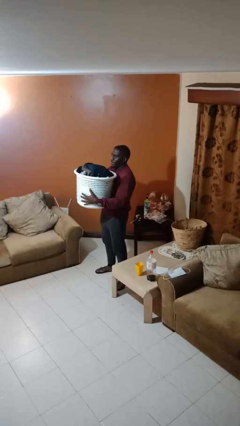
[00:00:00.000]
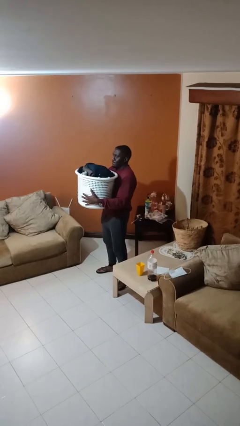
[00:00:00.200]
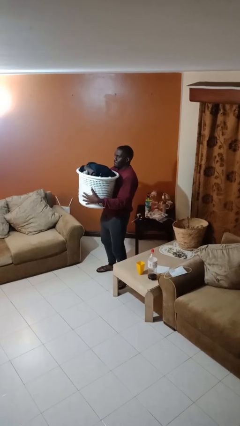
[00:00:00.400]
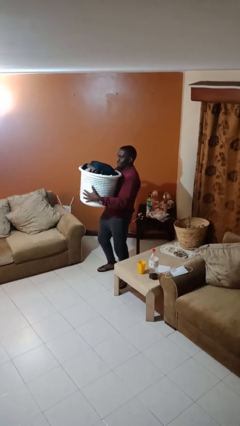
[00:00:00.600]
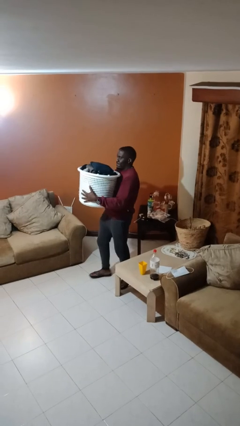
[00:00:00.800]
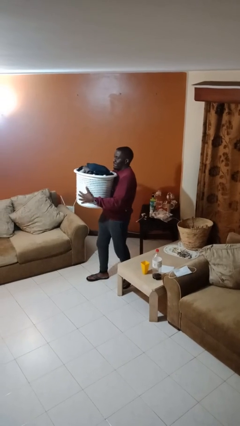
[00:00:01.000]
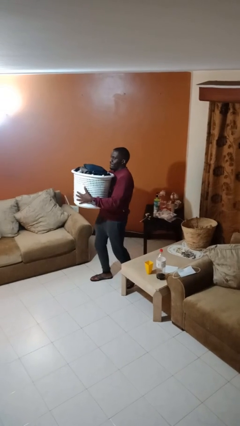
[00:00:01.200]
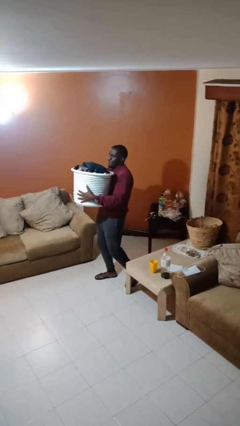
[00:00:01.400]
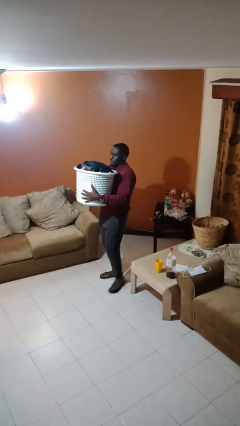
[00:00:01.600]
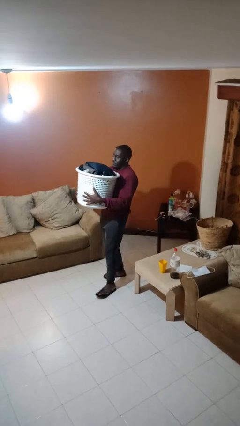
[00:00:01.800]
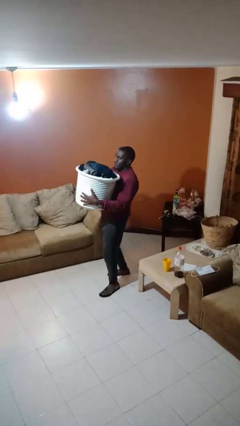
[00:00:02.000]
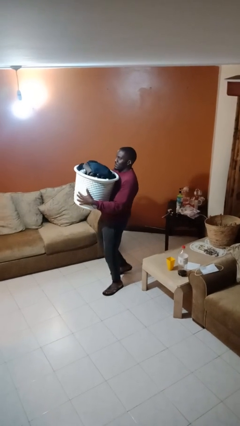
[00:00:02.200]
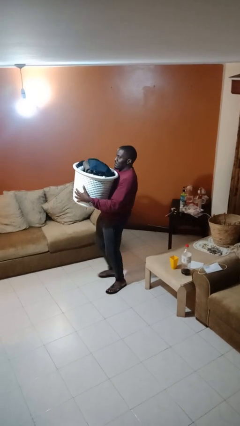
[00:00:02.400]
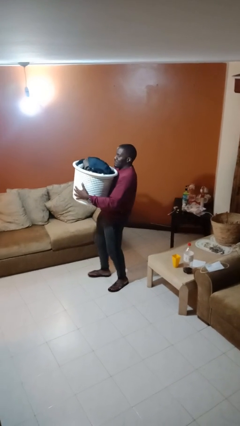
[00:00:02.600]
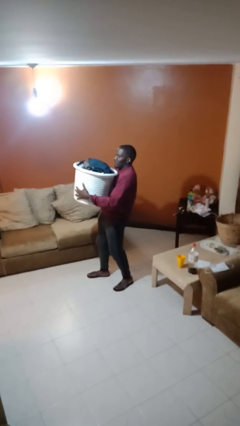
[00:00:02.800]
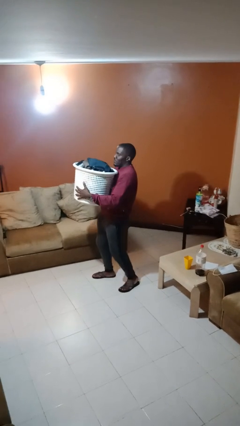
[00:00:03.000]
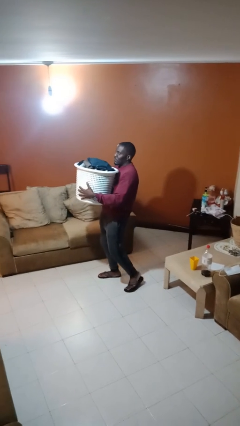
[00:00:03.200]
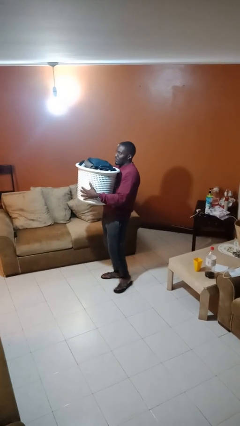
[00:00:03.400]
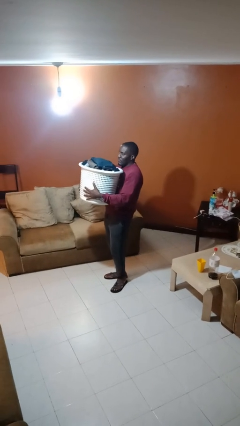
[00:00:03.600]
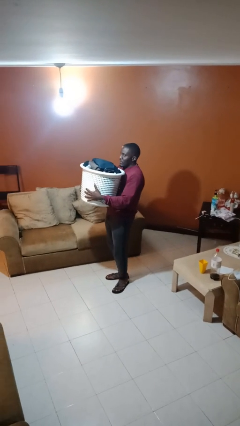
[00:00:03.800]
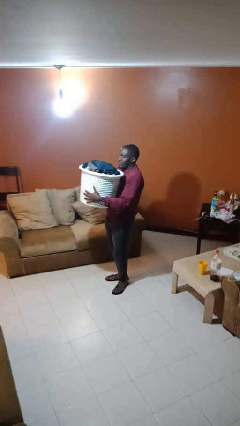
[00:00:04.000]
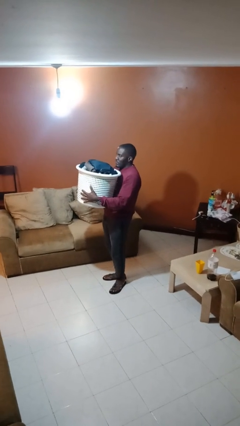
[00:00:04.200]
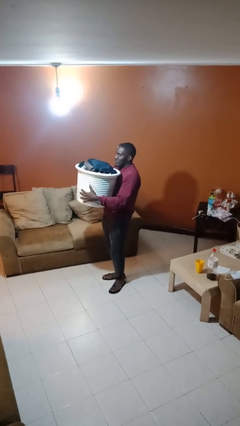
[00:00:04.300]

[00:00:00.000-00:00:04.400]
person carries laundry basket

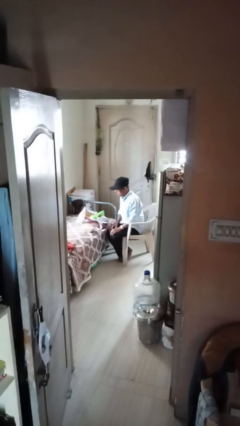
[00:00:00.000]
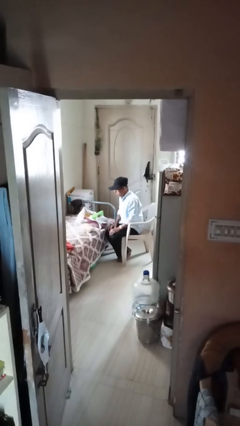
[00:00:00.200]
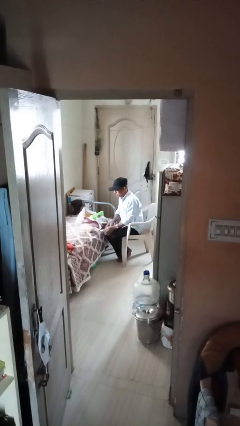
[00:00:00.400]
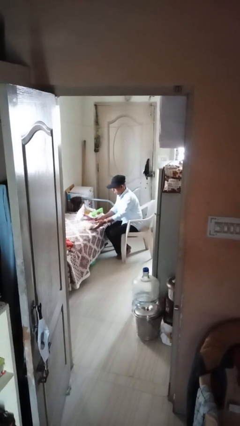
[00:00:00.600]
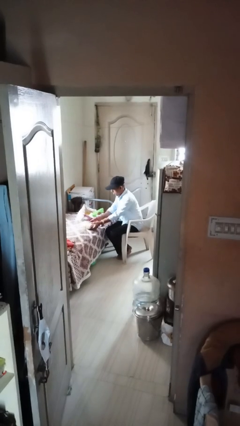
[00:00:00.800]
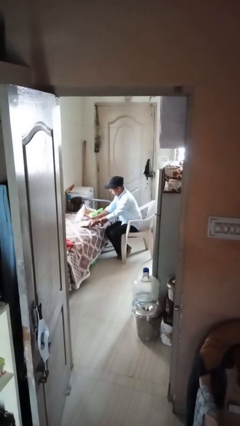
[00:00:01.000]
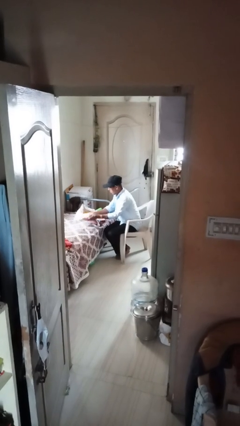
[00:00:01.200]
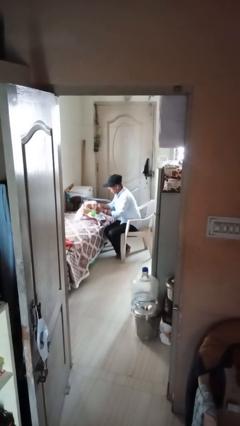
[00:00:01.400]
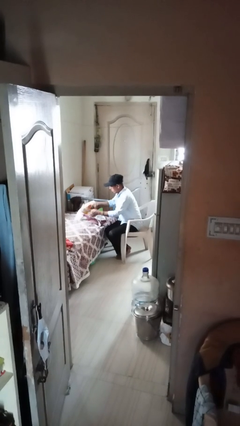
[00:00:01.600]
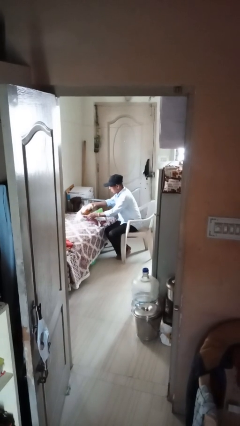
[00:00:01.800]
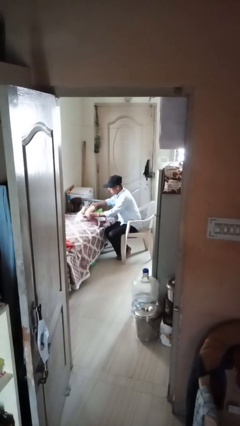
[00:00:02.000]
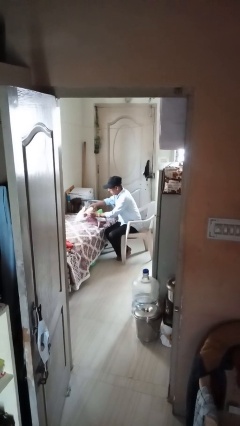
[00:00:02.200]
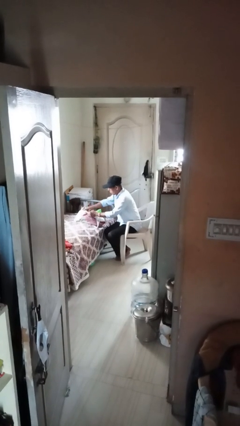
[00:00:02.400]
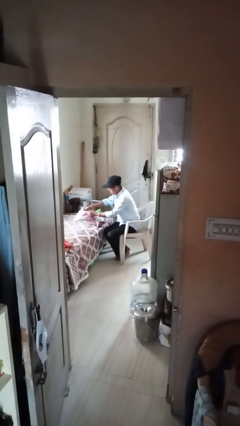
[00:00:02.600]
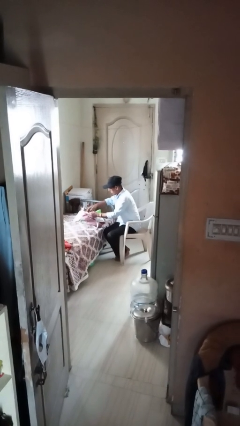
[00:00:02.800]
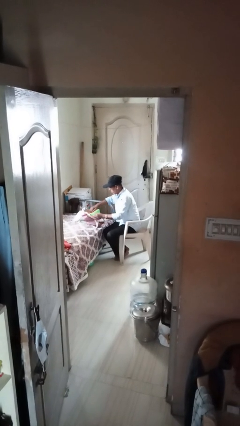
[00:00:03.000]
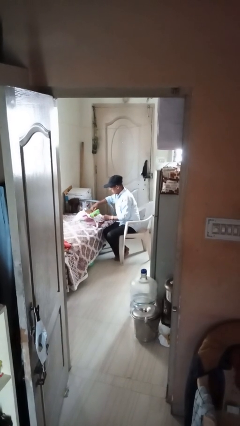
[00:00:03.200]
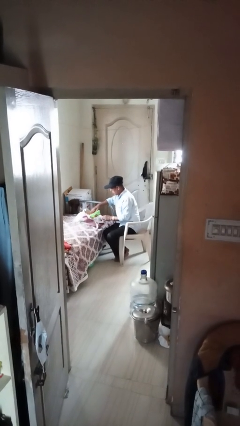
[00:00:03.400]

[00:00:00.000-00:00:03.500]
person puts object into bag

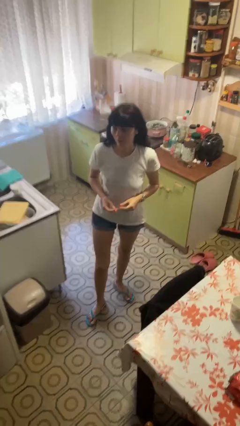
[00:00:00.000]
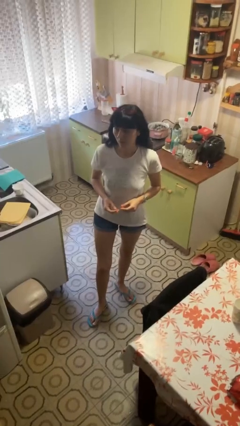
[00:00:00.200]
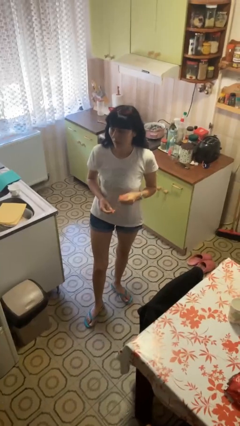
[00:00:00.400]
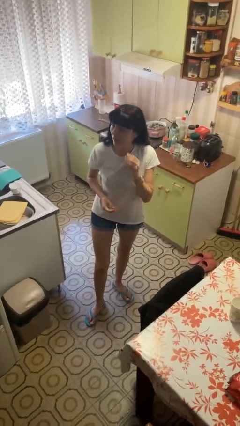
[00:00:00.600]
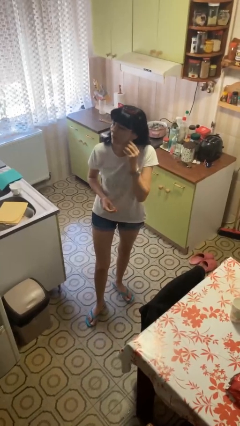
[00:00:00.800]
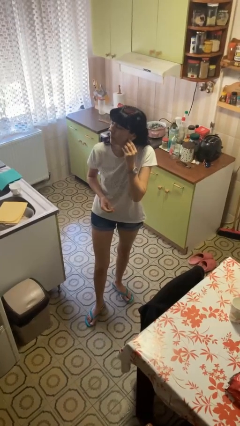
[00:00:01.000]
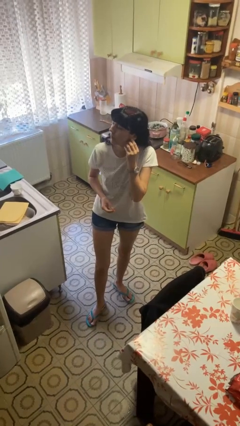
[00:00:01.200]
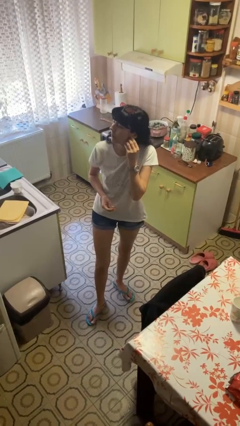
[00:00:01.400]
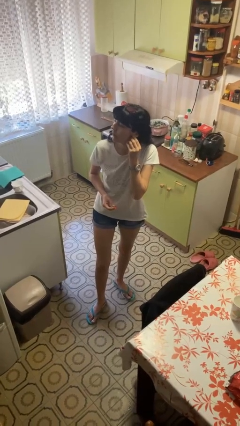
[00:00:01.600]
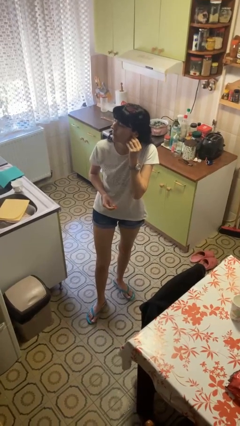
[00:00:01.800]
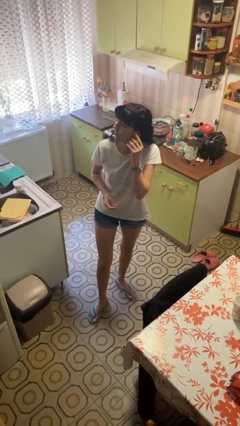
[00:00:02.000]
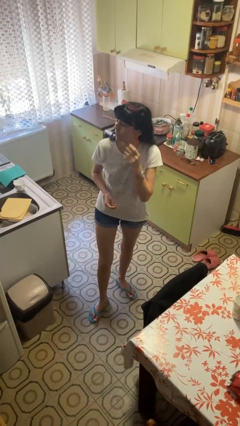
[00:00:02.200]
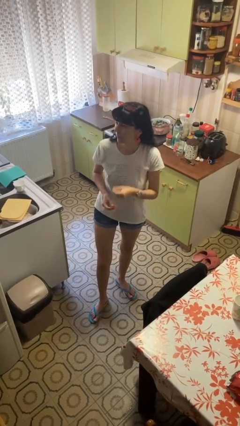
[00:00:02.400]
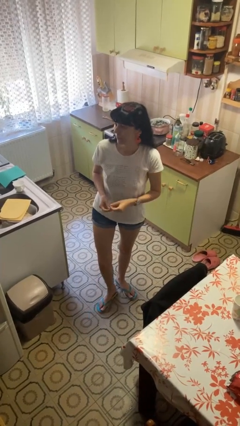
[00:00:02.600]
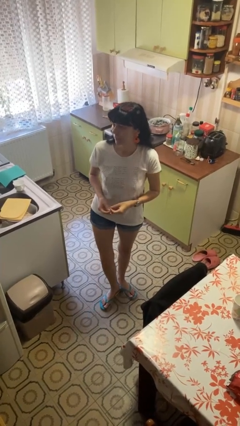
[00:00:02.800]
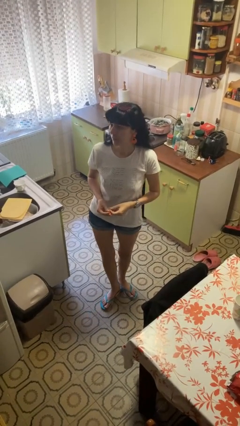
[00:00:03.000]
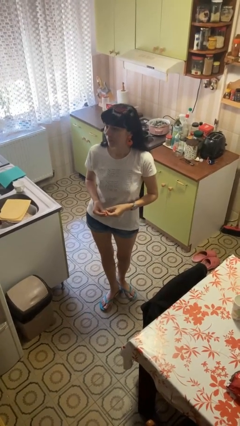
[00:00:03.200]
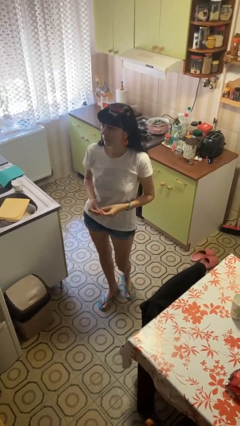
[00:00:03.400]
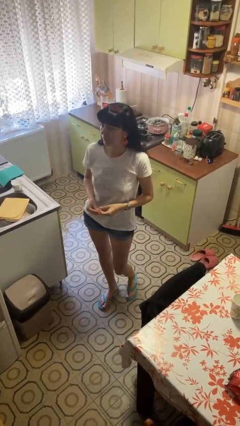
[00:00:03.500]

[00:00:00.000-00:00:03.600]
person puts on earrings

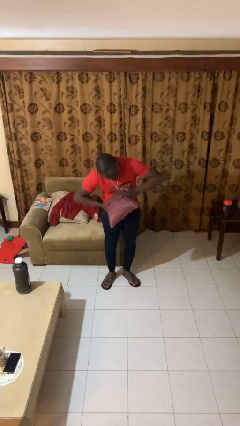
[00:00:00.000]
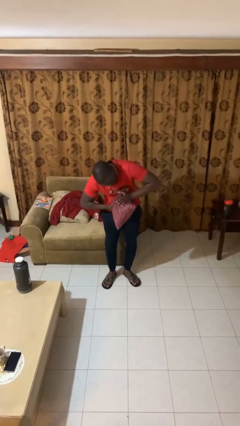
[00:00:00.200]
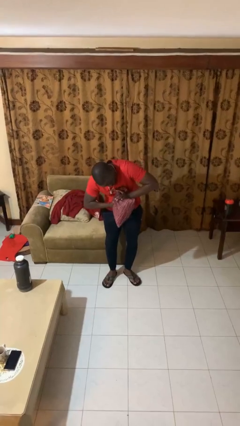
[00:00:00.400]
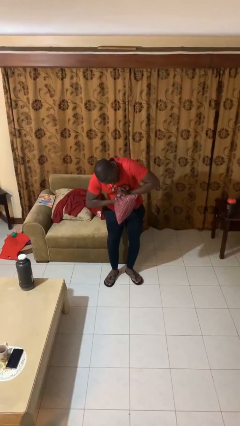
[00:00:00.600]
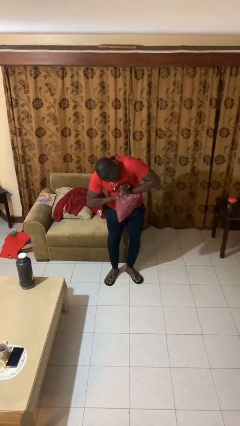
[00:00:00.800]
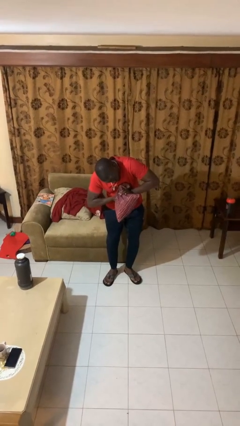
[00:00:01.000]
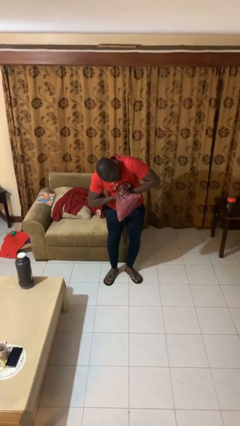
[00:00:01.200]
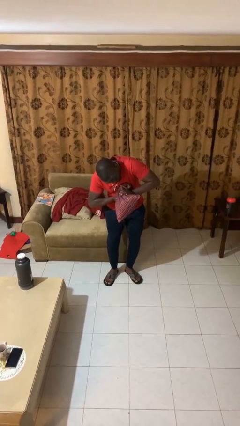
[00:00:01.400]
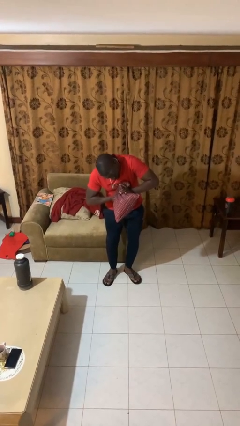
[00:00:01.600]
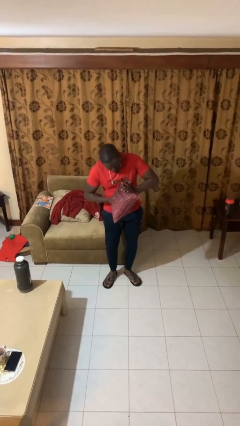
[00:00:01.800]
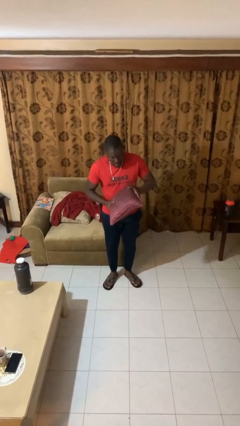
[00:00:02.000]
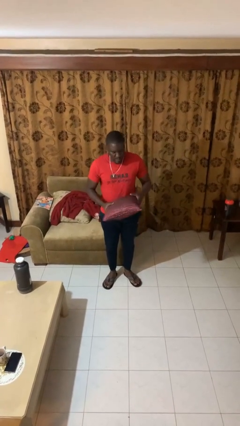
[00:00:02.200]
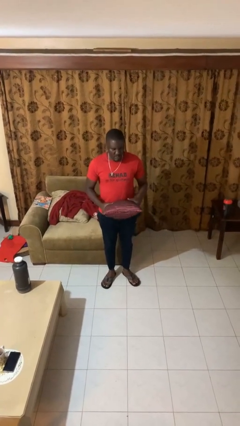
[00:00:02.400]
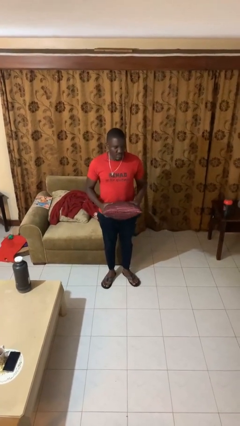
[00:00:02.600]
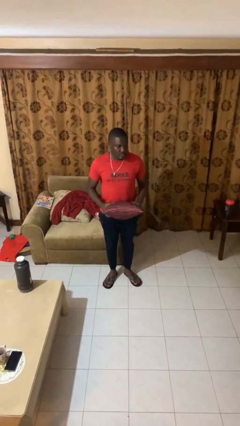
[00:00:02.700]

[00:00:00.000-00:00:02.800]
person squeezes object

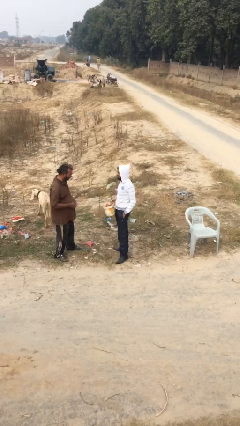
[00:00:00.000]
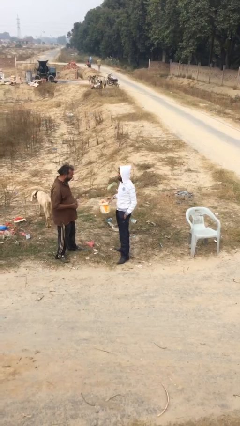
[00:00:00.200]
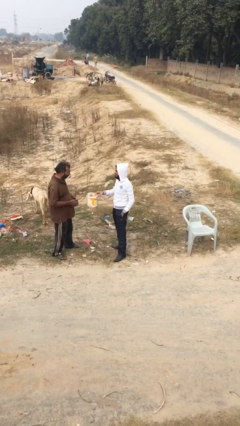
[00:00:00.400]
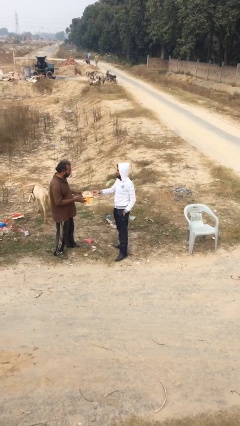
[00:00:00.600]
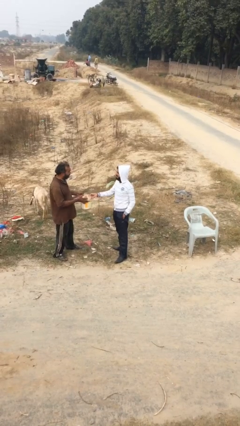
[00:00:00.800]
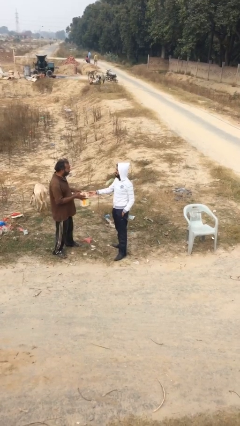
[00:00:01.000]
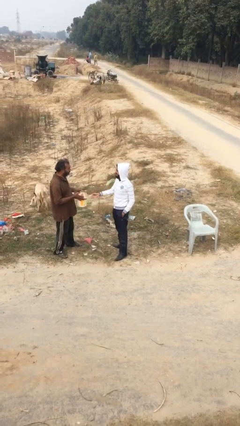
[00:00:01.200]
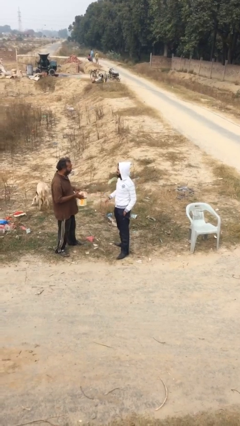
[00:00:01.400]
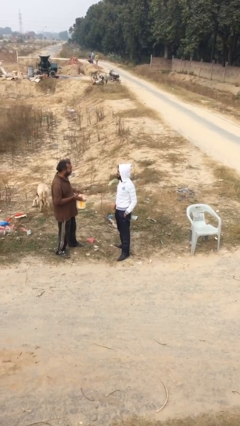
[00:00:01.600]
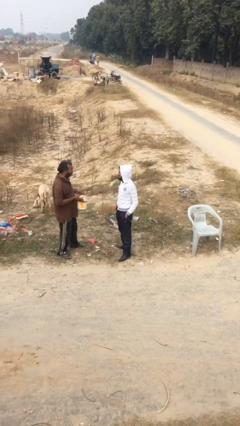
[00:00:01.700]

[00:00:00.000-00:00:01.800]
person transfers object to person

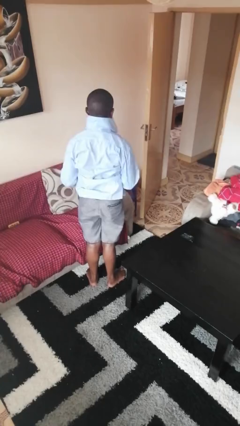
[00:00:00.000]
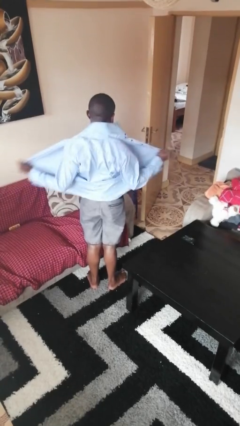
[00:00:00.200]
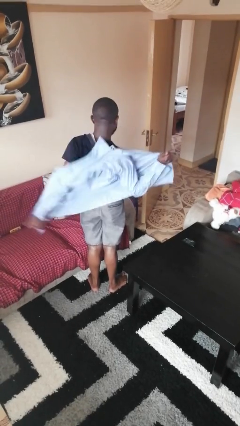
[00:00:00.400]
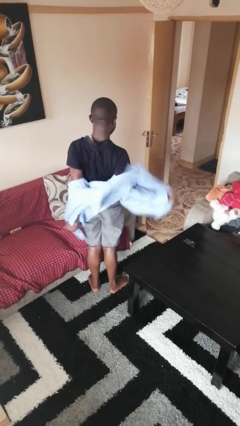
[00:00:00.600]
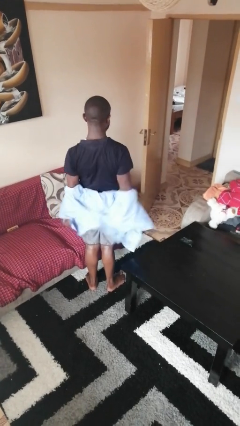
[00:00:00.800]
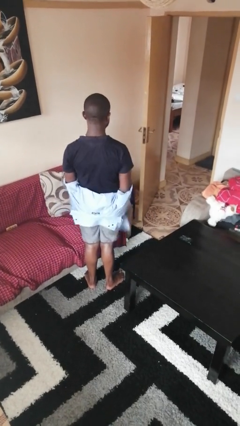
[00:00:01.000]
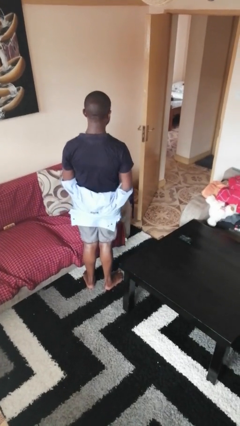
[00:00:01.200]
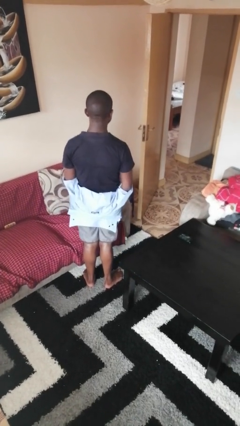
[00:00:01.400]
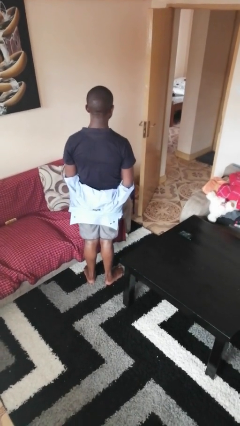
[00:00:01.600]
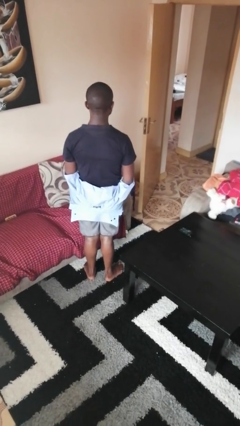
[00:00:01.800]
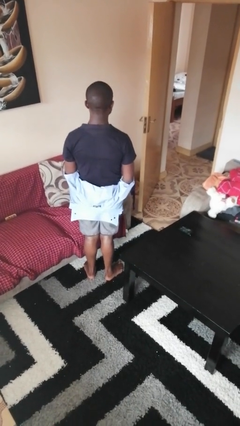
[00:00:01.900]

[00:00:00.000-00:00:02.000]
person takes off shirt
